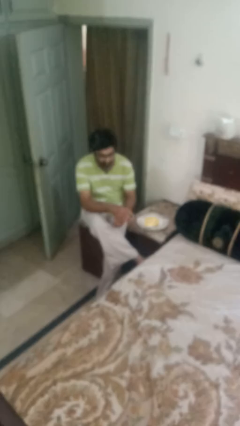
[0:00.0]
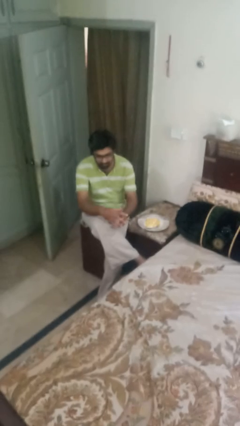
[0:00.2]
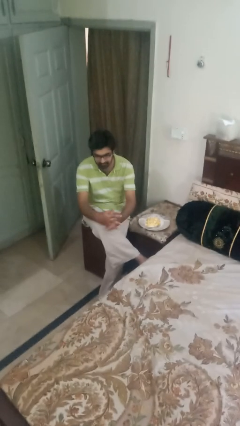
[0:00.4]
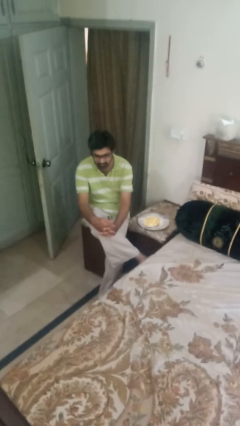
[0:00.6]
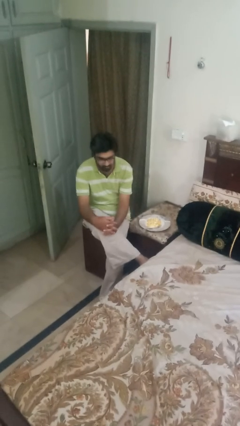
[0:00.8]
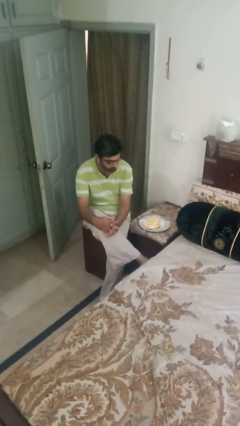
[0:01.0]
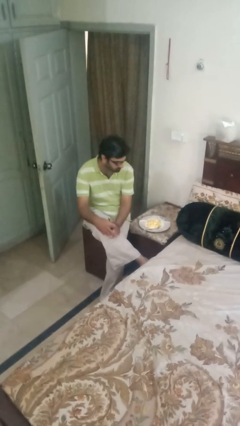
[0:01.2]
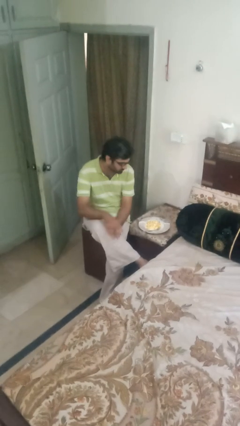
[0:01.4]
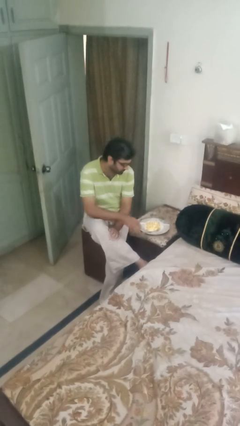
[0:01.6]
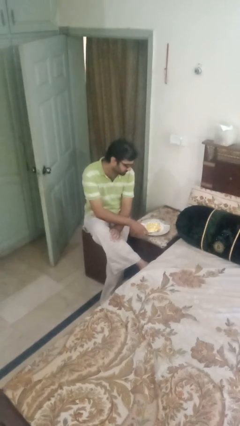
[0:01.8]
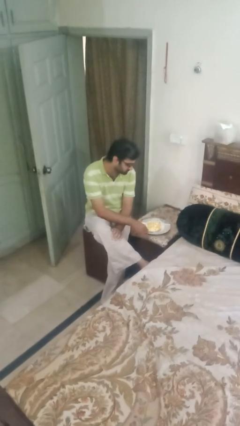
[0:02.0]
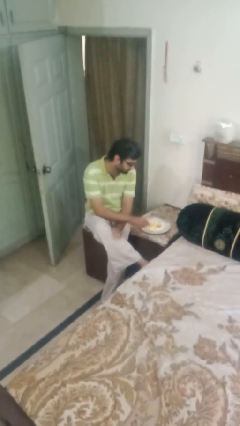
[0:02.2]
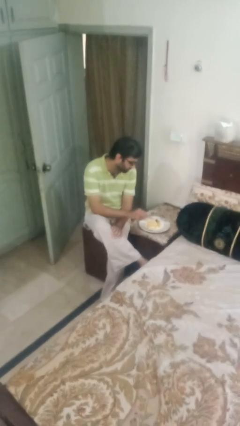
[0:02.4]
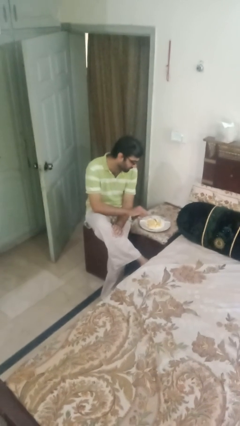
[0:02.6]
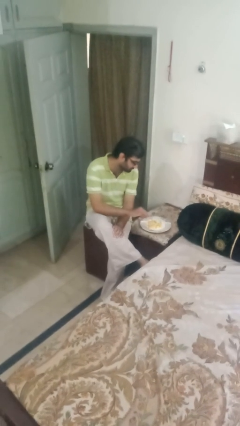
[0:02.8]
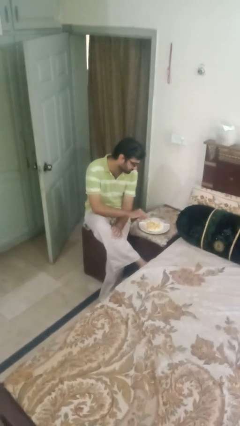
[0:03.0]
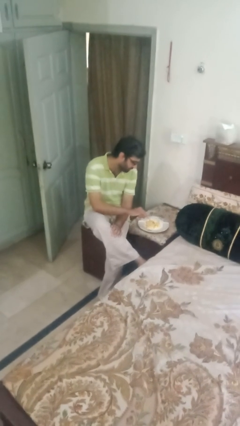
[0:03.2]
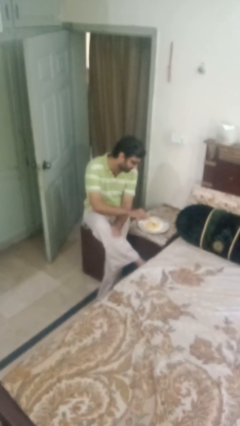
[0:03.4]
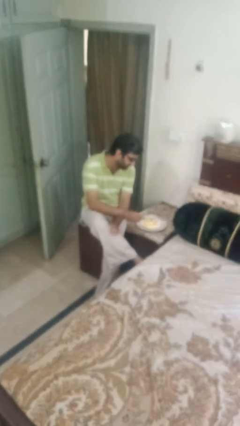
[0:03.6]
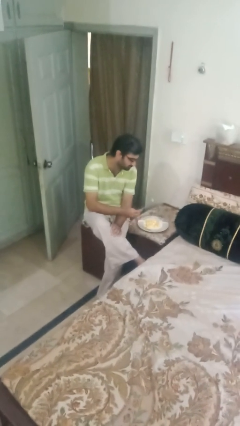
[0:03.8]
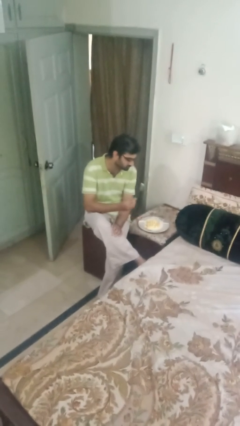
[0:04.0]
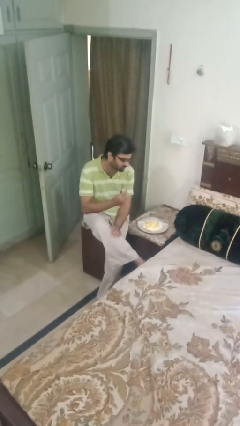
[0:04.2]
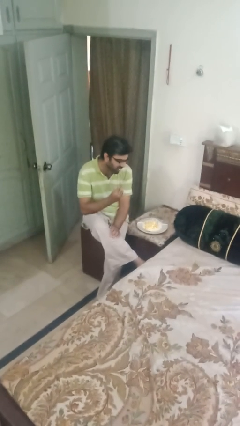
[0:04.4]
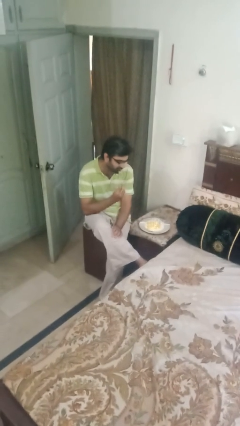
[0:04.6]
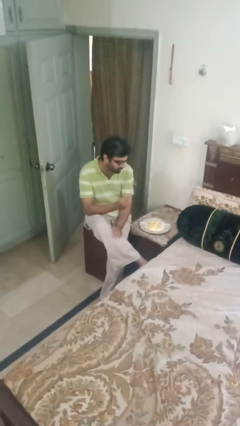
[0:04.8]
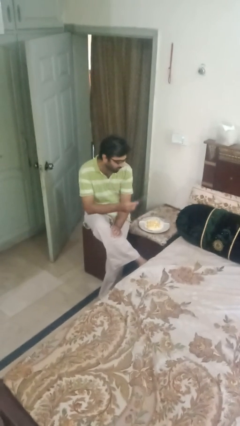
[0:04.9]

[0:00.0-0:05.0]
person eats with utensil

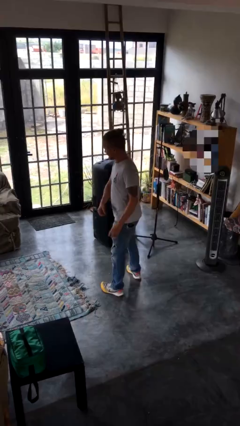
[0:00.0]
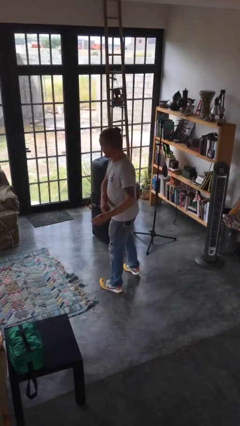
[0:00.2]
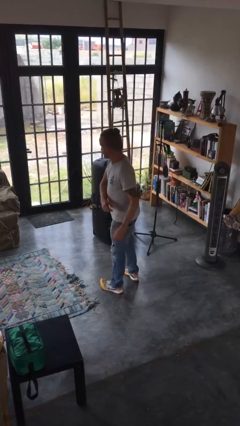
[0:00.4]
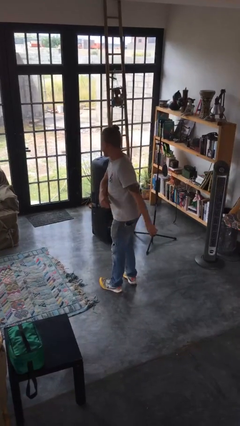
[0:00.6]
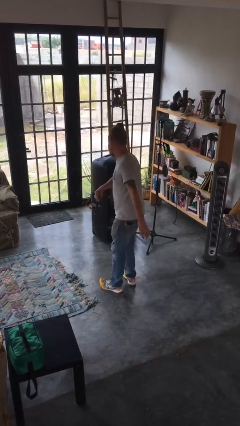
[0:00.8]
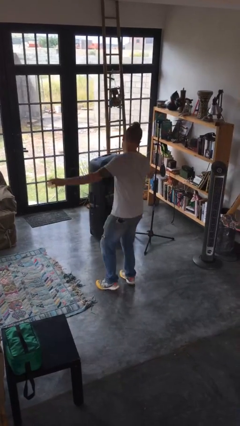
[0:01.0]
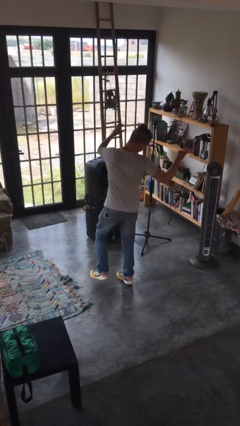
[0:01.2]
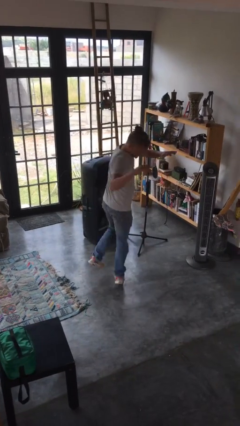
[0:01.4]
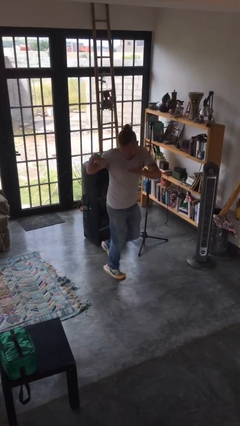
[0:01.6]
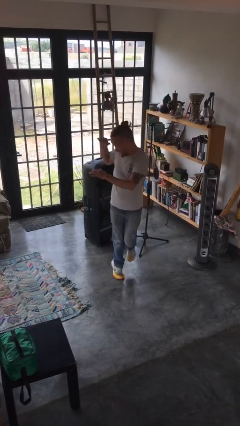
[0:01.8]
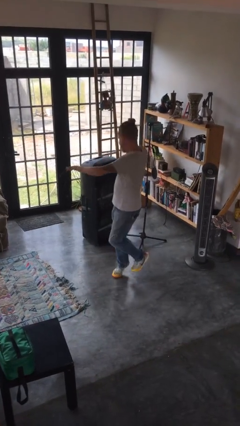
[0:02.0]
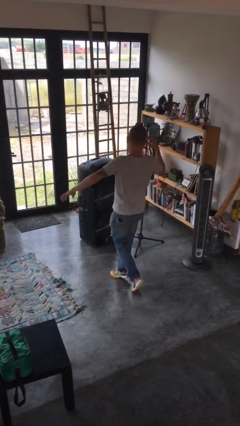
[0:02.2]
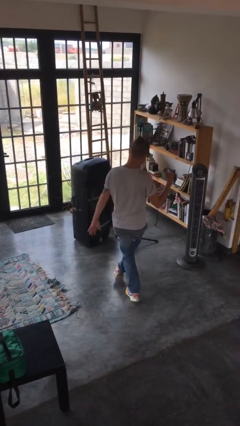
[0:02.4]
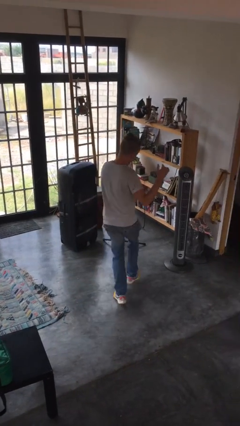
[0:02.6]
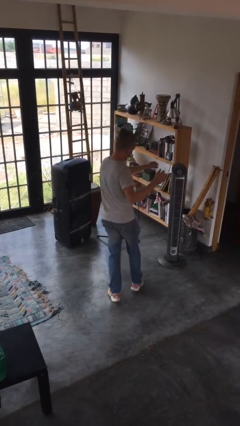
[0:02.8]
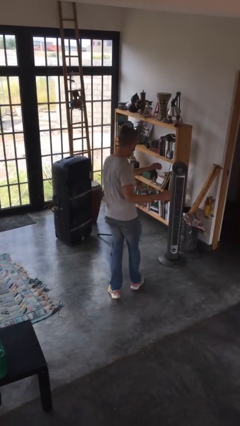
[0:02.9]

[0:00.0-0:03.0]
person twirls

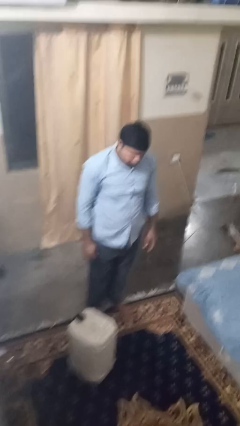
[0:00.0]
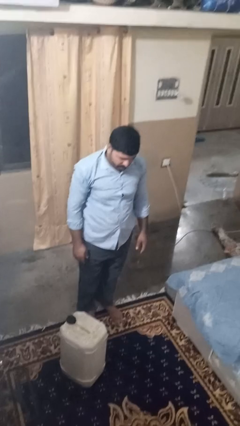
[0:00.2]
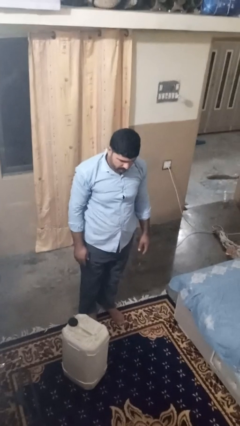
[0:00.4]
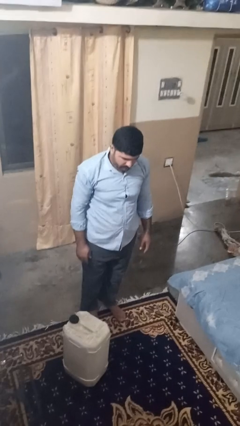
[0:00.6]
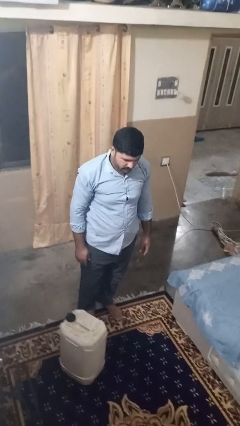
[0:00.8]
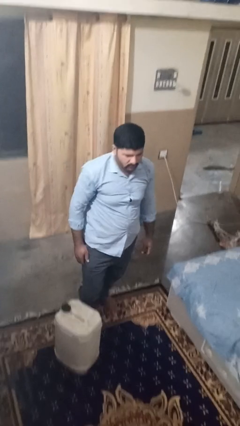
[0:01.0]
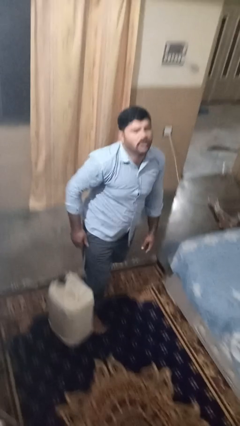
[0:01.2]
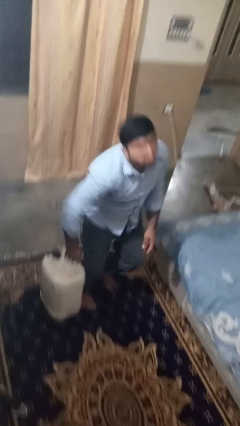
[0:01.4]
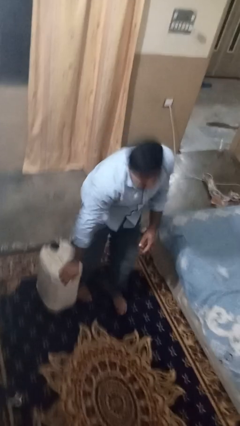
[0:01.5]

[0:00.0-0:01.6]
person trips on object on floor

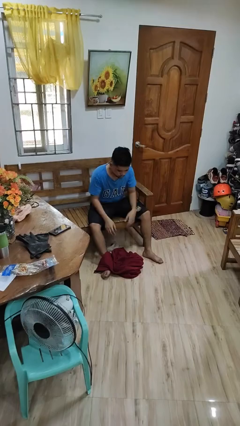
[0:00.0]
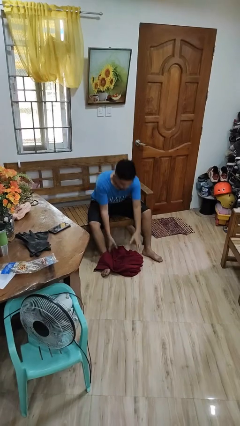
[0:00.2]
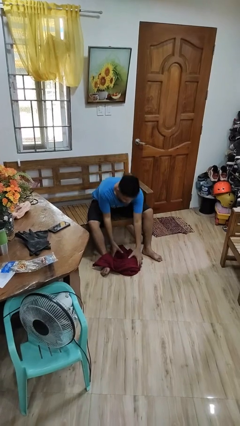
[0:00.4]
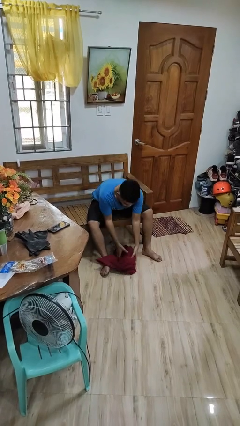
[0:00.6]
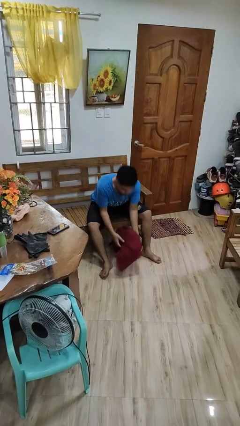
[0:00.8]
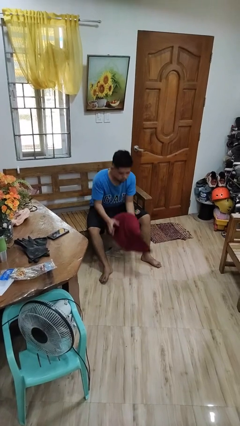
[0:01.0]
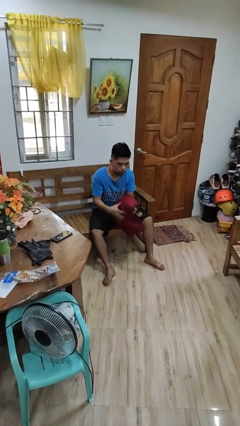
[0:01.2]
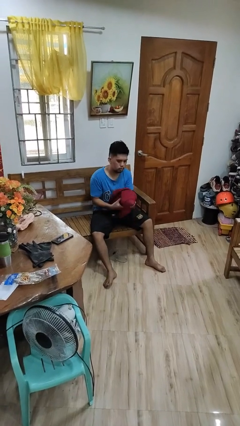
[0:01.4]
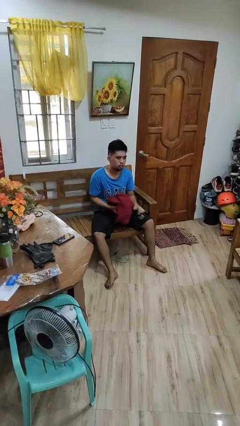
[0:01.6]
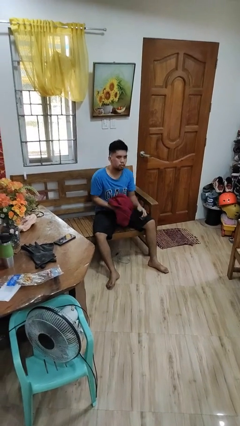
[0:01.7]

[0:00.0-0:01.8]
person picks up object from floor

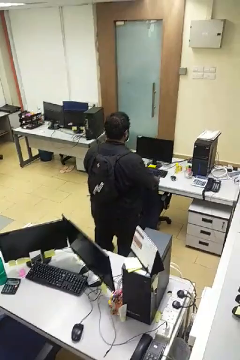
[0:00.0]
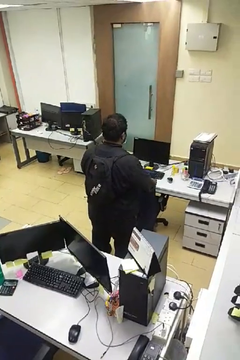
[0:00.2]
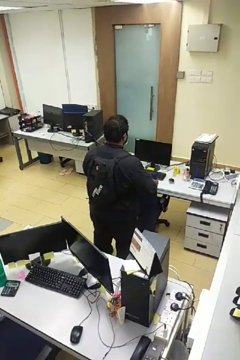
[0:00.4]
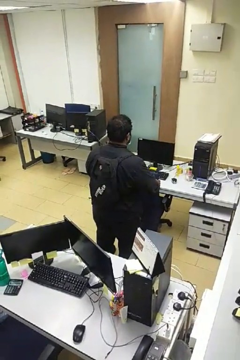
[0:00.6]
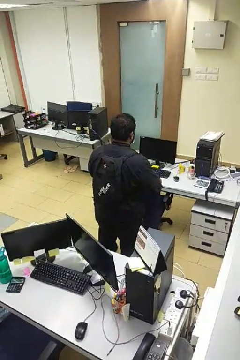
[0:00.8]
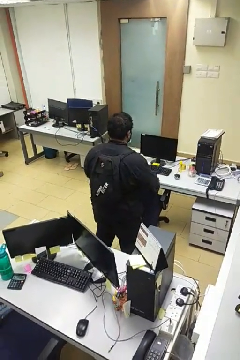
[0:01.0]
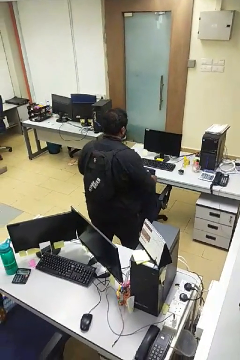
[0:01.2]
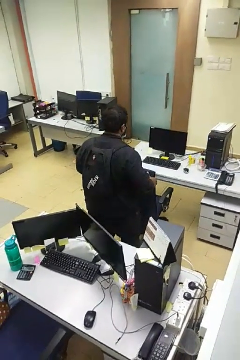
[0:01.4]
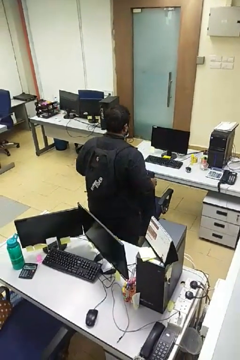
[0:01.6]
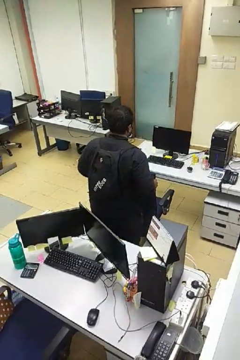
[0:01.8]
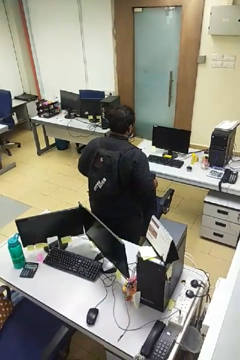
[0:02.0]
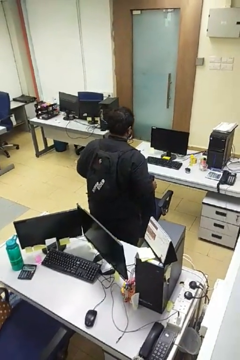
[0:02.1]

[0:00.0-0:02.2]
person pulls out chair

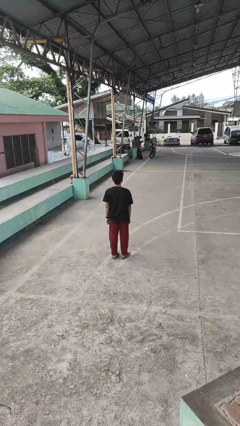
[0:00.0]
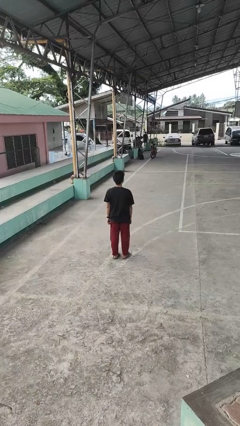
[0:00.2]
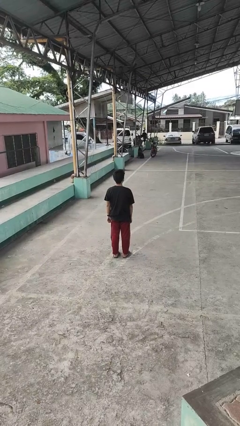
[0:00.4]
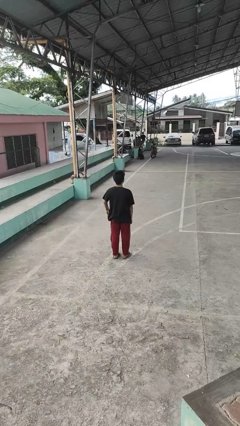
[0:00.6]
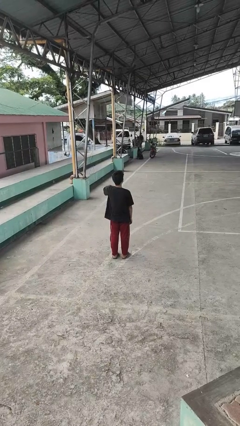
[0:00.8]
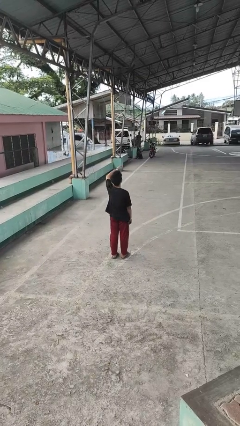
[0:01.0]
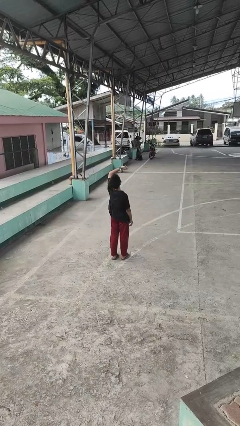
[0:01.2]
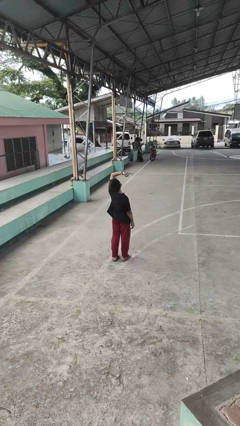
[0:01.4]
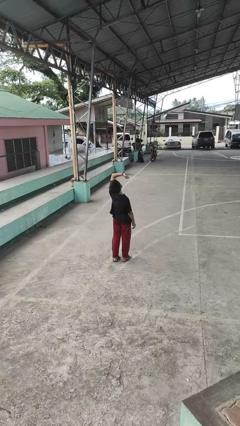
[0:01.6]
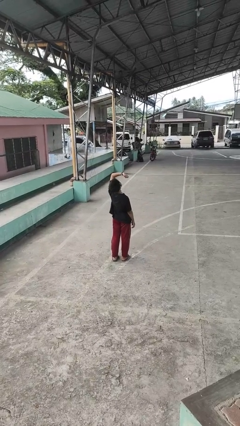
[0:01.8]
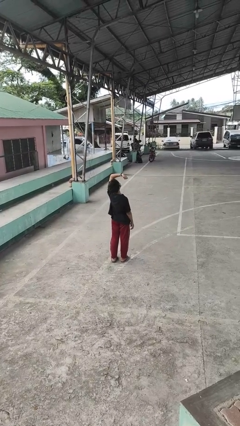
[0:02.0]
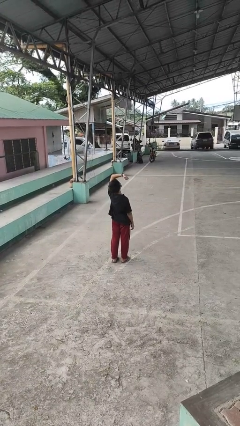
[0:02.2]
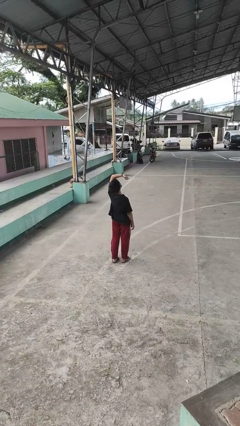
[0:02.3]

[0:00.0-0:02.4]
person looks at wristwatch

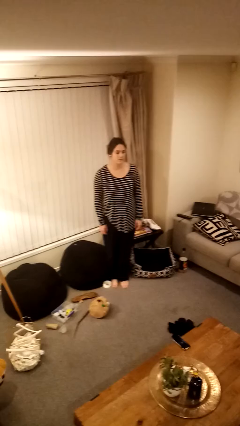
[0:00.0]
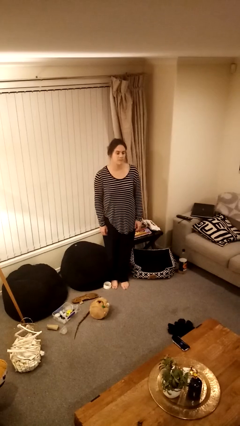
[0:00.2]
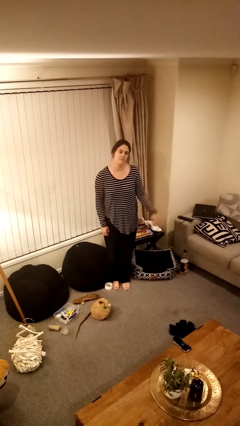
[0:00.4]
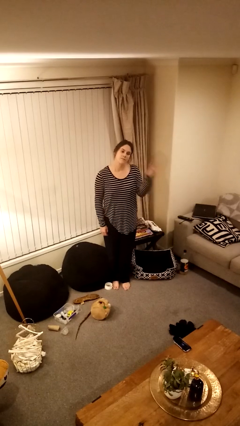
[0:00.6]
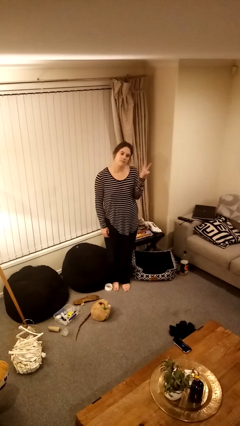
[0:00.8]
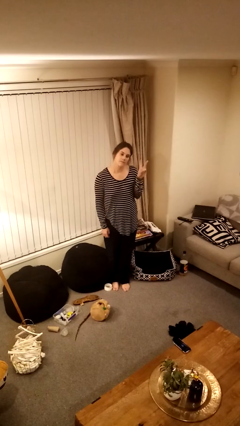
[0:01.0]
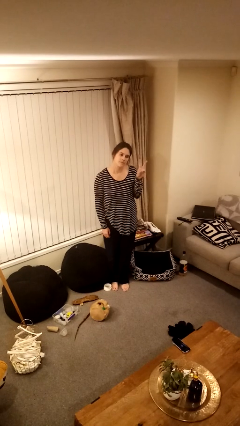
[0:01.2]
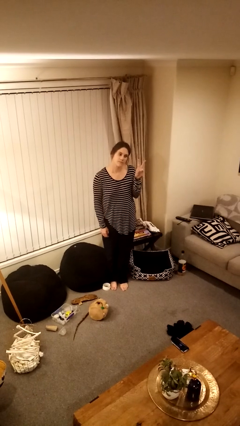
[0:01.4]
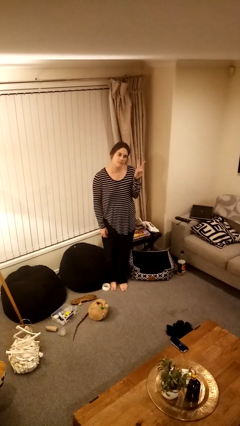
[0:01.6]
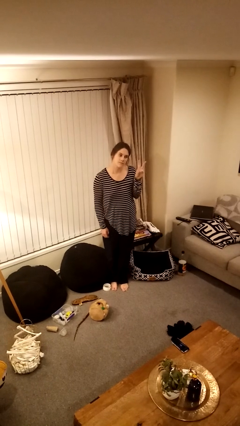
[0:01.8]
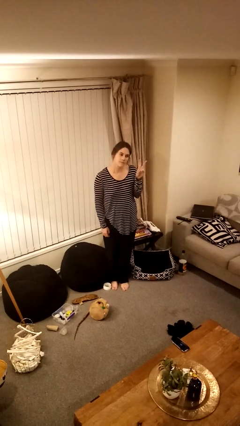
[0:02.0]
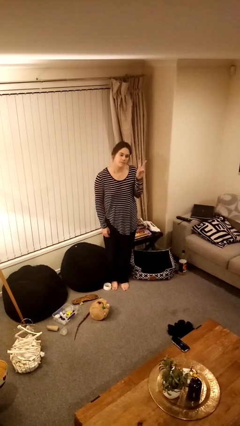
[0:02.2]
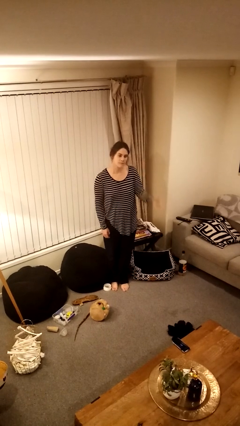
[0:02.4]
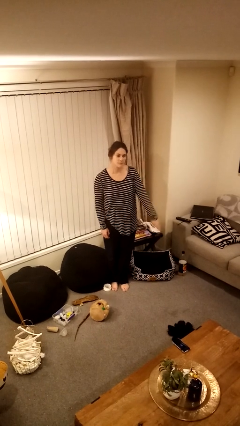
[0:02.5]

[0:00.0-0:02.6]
person gestures peace
